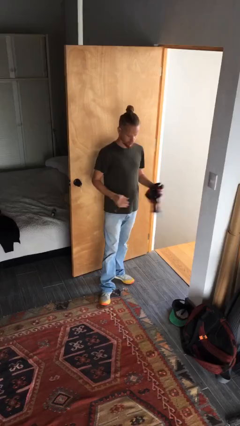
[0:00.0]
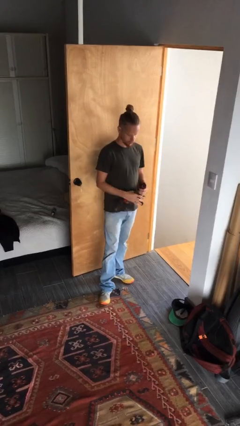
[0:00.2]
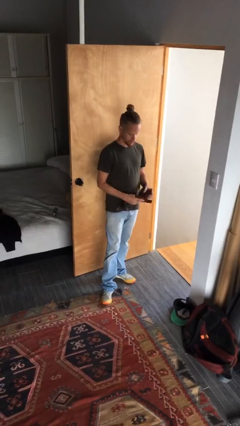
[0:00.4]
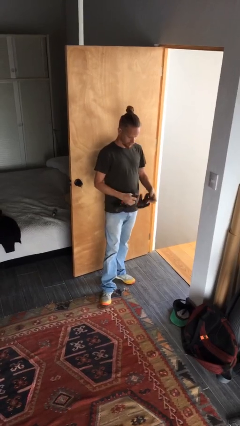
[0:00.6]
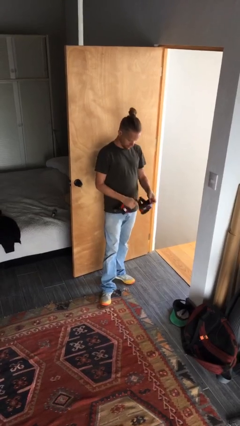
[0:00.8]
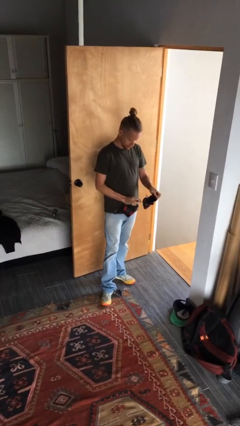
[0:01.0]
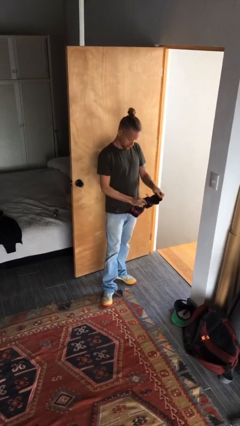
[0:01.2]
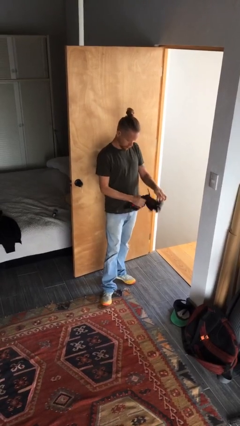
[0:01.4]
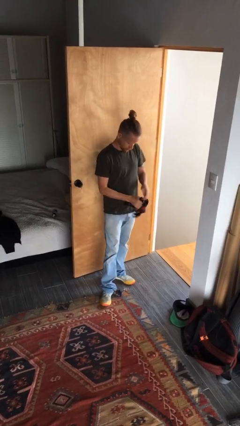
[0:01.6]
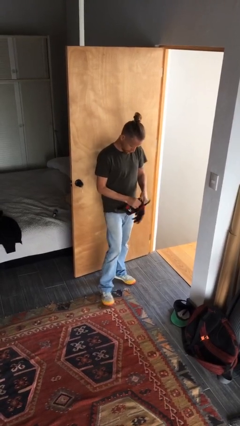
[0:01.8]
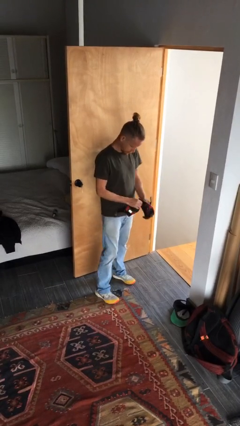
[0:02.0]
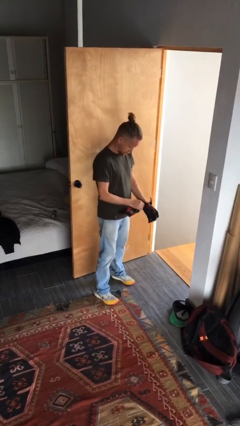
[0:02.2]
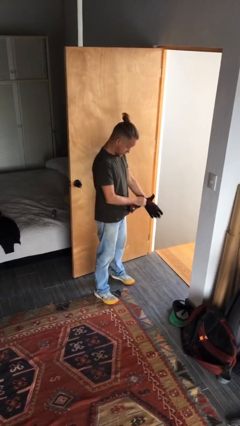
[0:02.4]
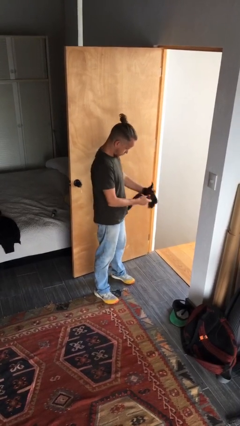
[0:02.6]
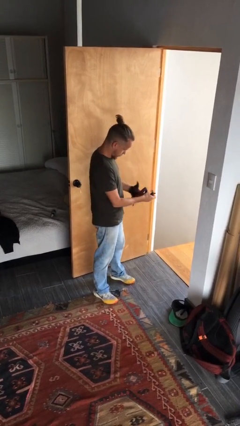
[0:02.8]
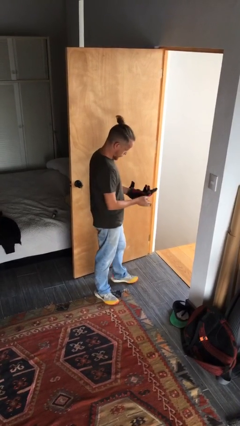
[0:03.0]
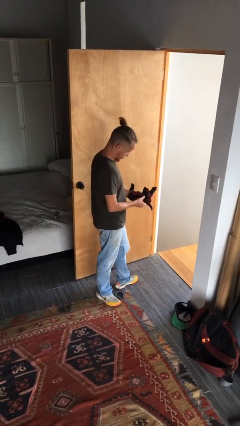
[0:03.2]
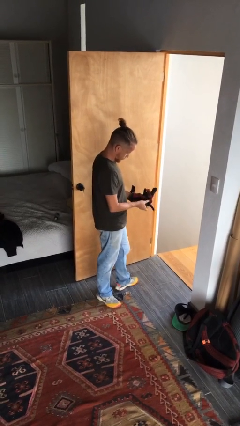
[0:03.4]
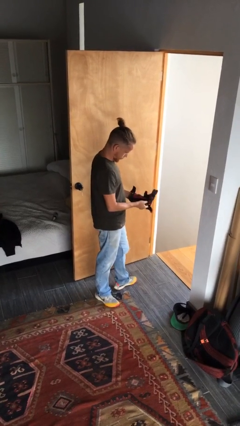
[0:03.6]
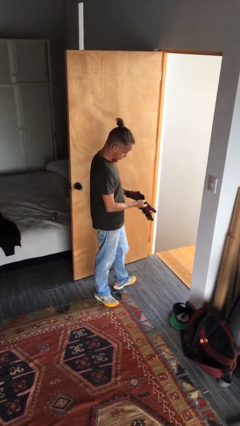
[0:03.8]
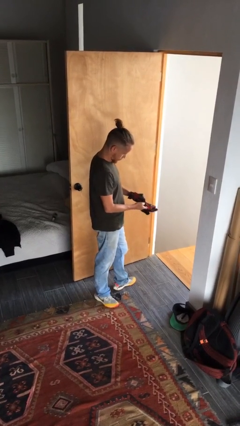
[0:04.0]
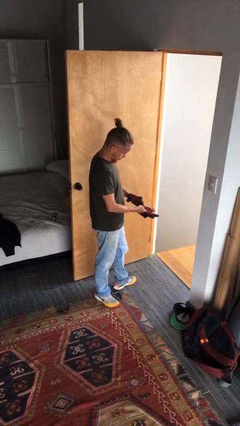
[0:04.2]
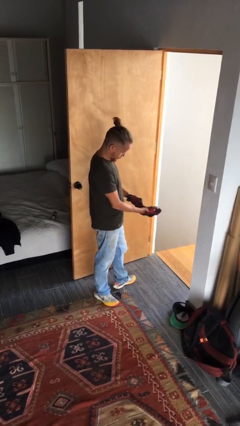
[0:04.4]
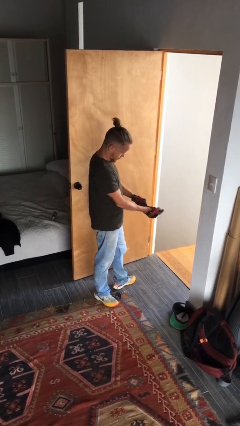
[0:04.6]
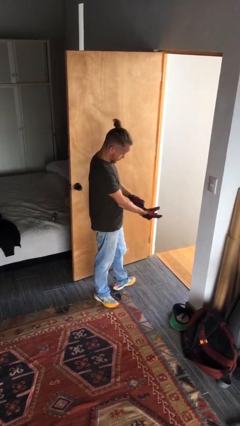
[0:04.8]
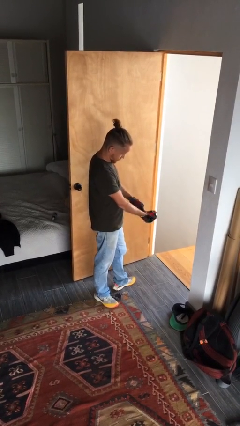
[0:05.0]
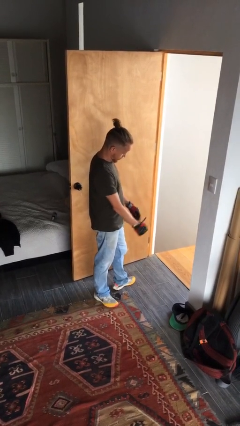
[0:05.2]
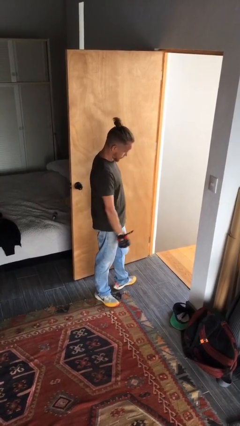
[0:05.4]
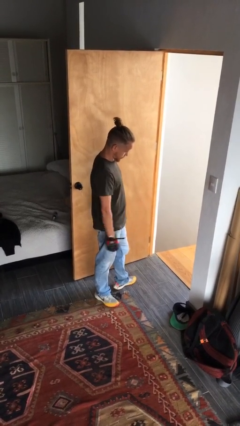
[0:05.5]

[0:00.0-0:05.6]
person puts on gloves

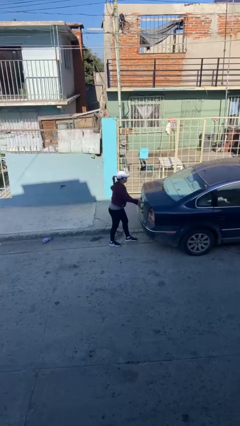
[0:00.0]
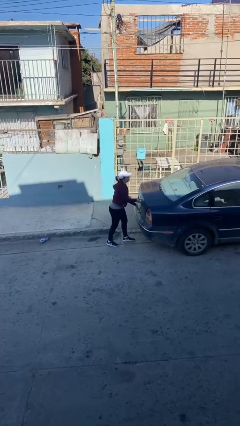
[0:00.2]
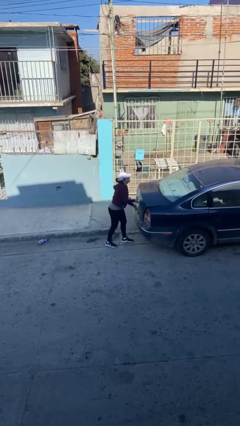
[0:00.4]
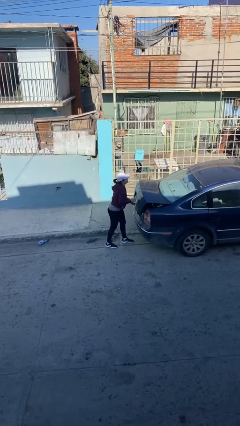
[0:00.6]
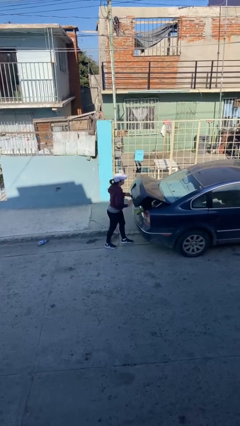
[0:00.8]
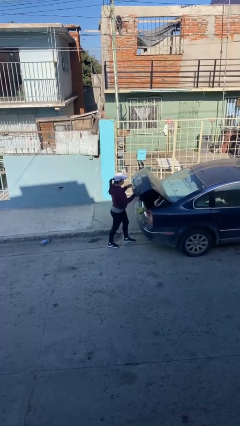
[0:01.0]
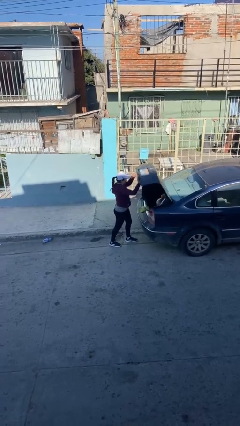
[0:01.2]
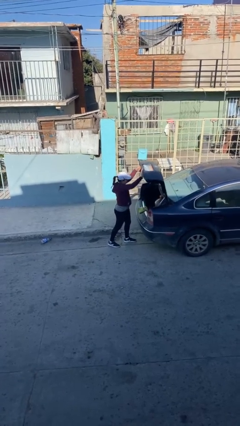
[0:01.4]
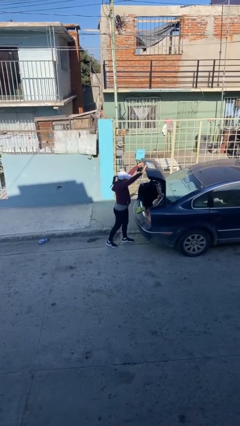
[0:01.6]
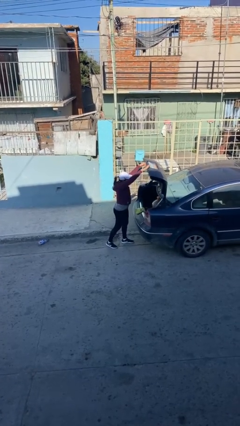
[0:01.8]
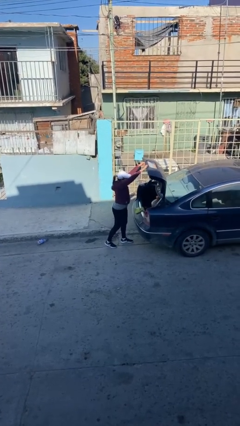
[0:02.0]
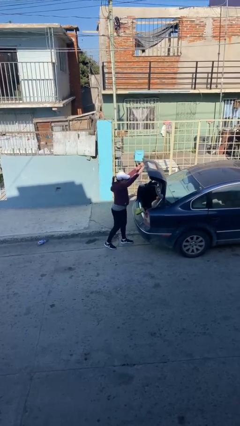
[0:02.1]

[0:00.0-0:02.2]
person opens car trunk

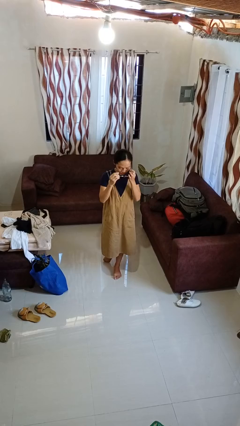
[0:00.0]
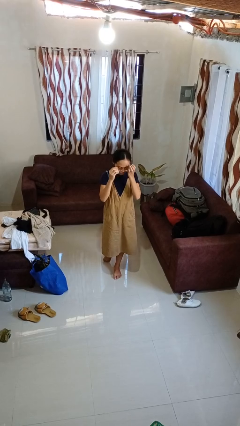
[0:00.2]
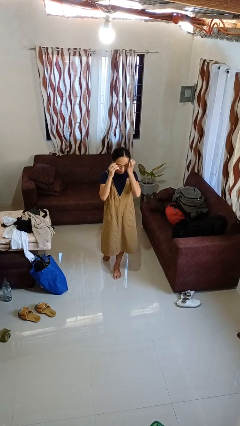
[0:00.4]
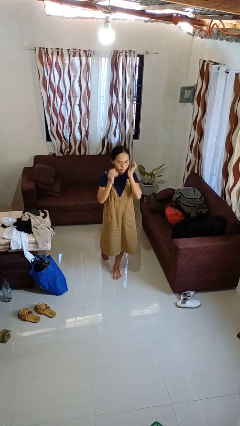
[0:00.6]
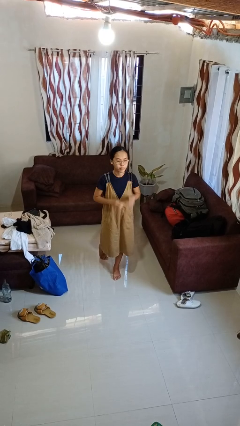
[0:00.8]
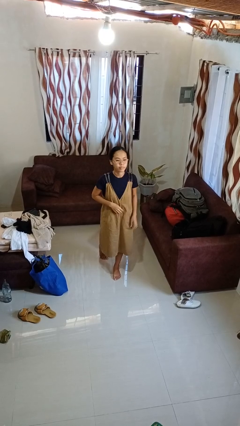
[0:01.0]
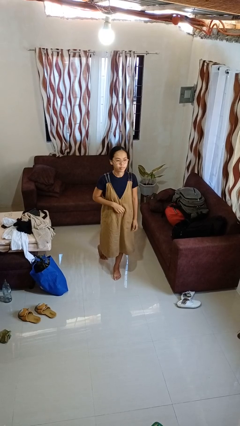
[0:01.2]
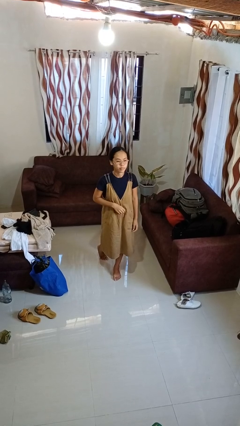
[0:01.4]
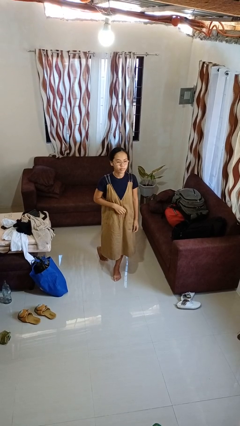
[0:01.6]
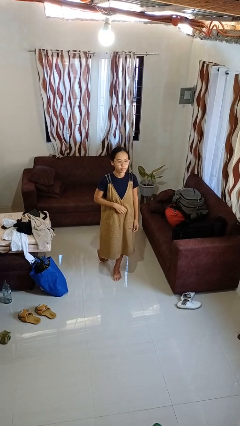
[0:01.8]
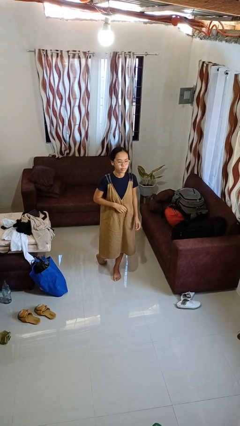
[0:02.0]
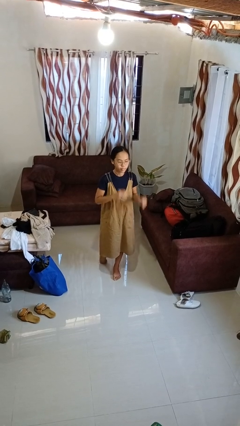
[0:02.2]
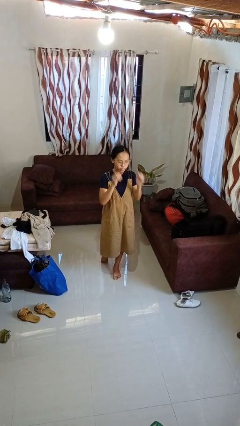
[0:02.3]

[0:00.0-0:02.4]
person puts on glasses

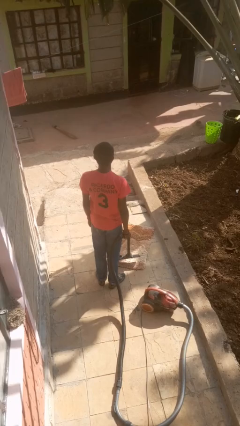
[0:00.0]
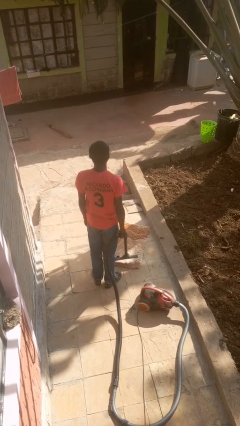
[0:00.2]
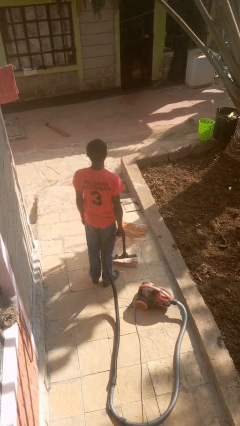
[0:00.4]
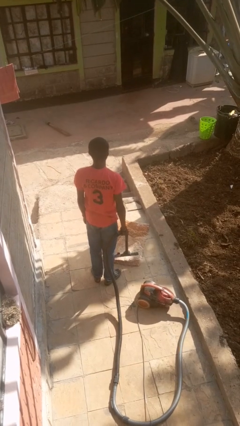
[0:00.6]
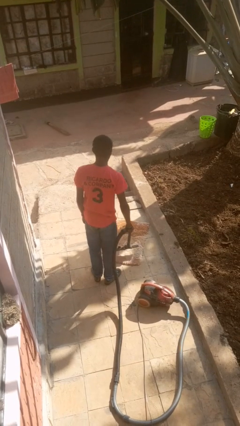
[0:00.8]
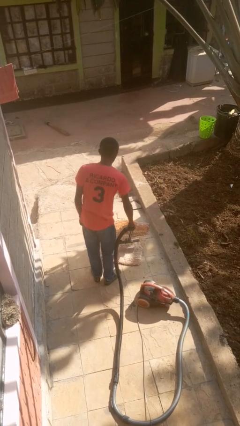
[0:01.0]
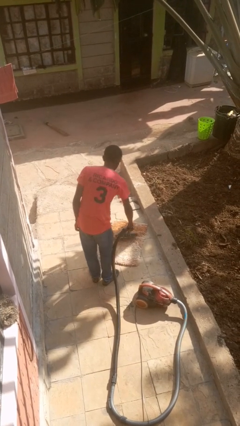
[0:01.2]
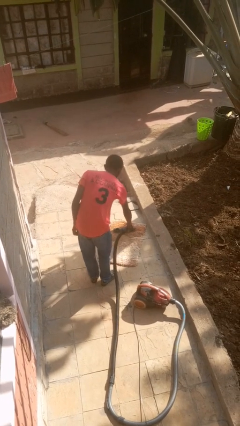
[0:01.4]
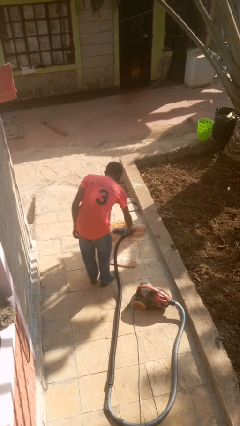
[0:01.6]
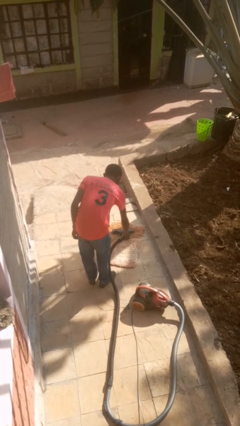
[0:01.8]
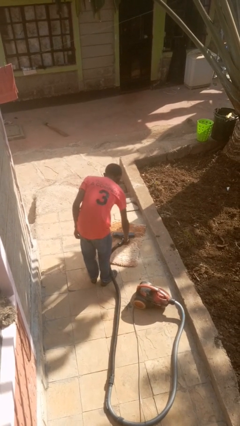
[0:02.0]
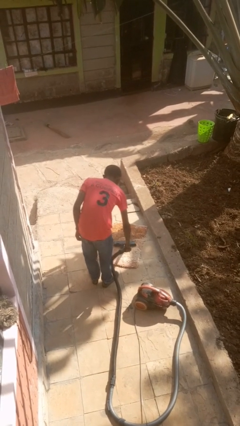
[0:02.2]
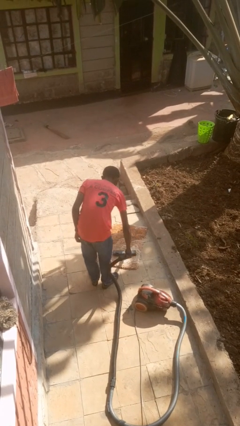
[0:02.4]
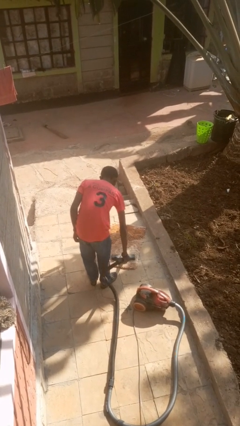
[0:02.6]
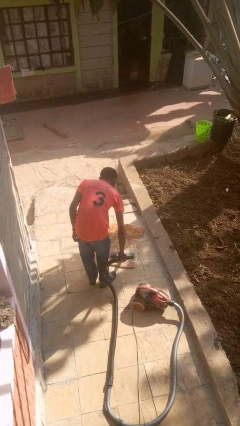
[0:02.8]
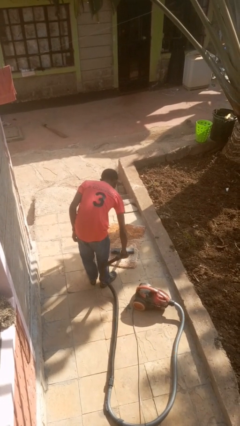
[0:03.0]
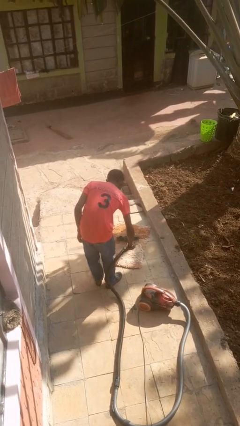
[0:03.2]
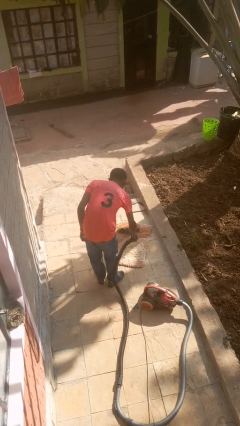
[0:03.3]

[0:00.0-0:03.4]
person vacuums carpet

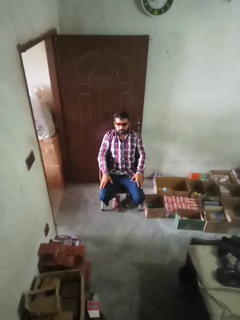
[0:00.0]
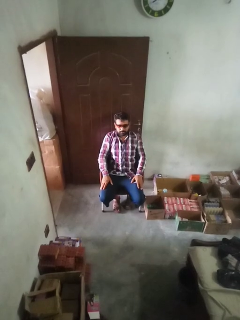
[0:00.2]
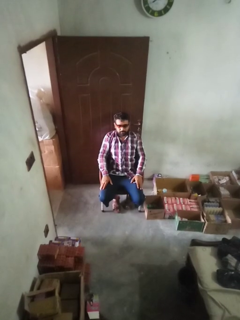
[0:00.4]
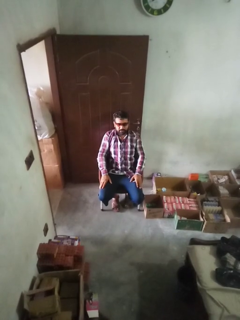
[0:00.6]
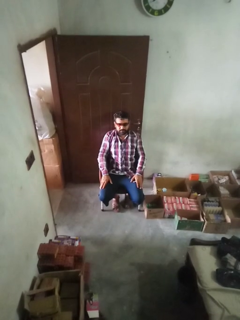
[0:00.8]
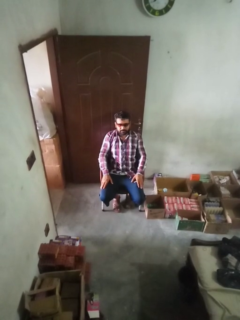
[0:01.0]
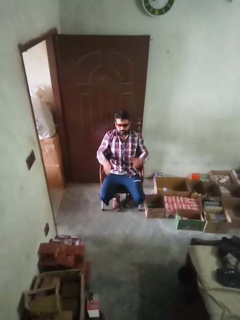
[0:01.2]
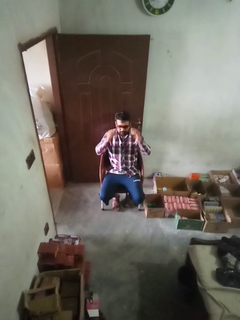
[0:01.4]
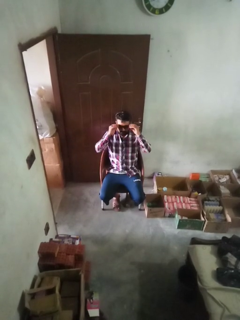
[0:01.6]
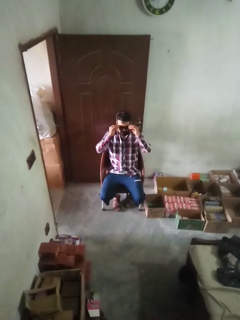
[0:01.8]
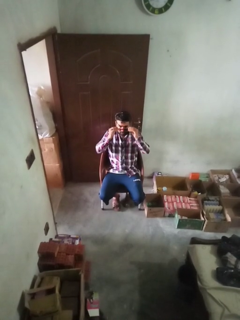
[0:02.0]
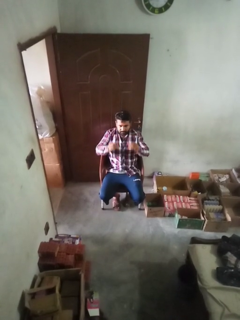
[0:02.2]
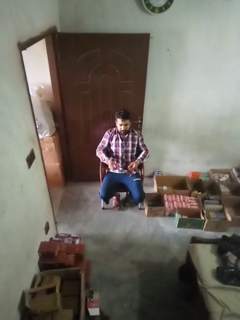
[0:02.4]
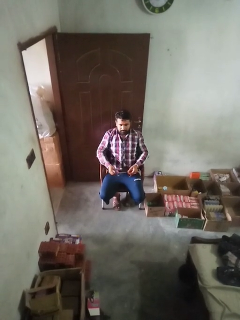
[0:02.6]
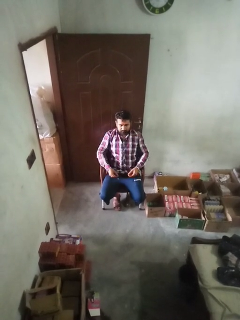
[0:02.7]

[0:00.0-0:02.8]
person takes off sunglasses

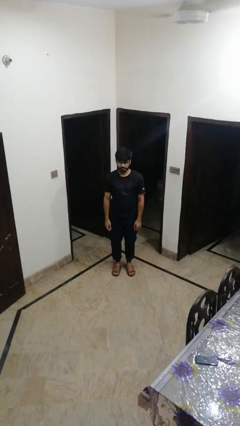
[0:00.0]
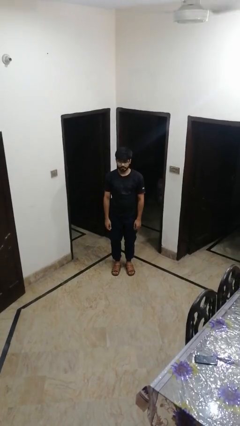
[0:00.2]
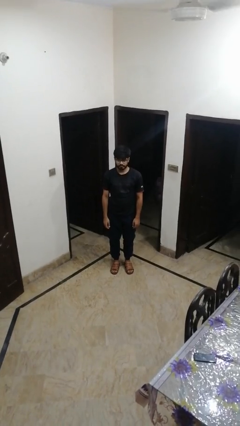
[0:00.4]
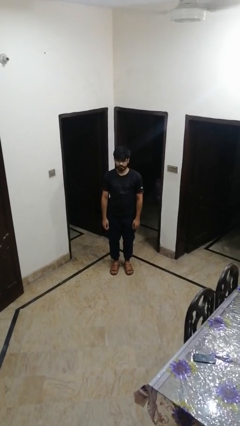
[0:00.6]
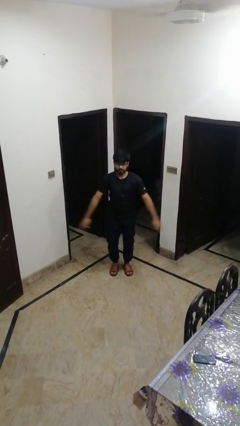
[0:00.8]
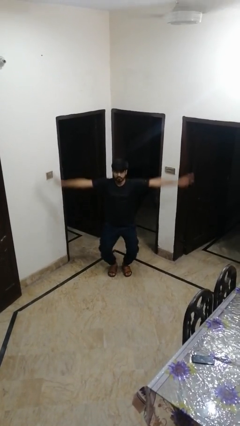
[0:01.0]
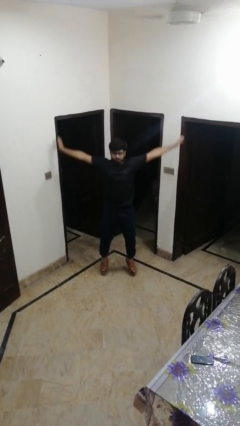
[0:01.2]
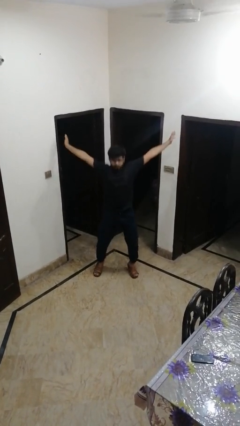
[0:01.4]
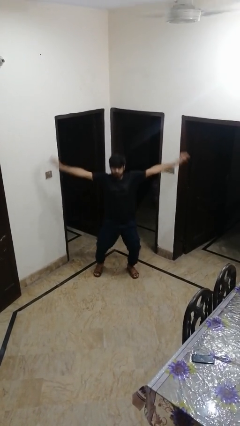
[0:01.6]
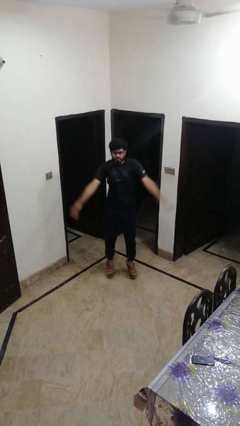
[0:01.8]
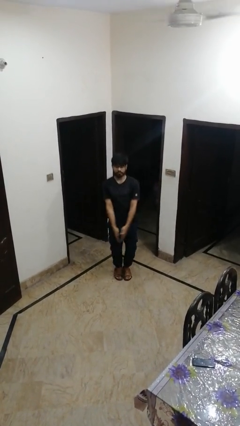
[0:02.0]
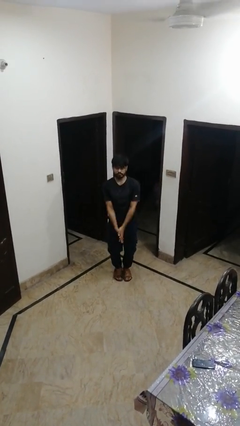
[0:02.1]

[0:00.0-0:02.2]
person exercises with jumping jacks
